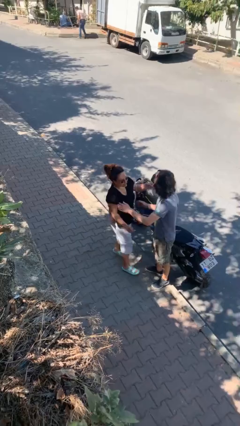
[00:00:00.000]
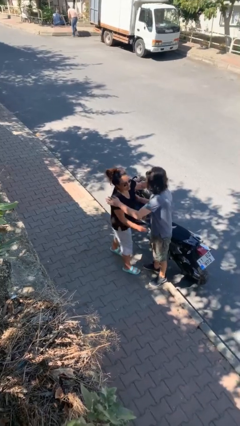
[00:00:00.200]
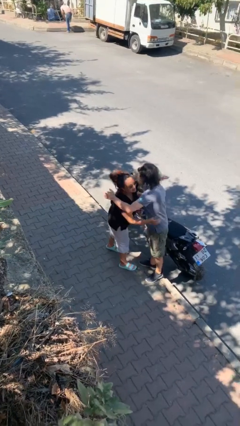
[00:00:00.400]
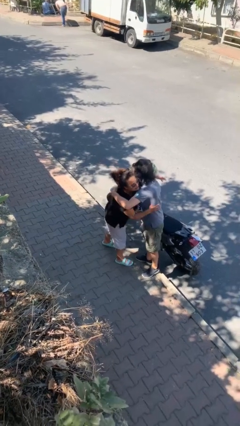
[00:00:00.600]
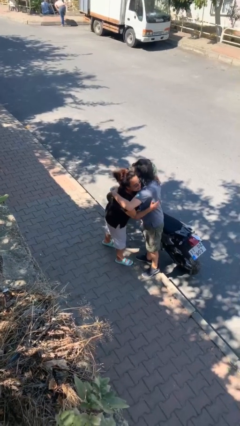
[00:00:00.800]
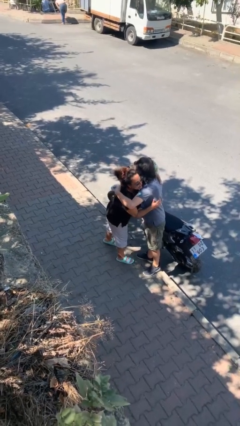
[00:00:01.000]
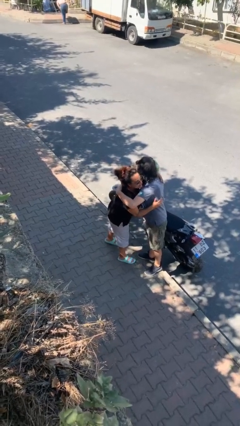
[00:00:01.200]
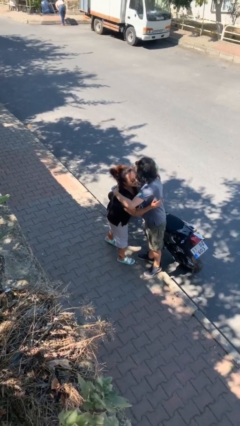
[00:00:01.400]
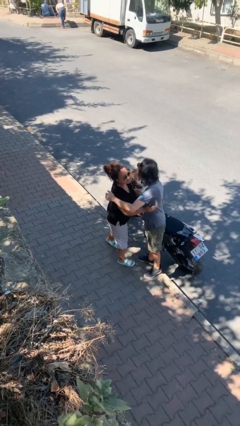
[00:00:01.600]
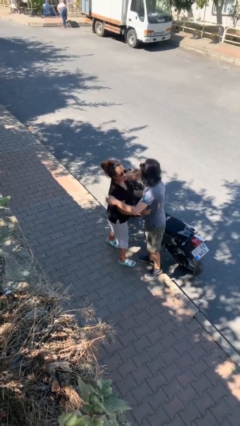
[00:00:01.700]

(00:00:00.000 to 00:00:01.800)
person embraces person

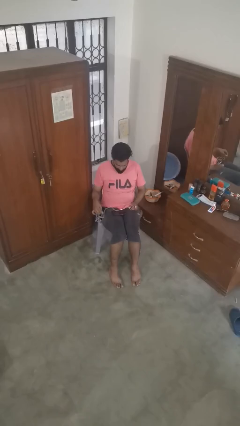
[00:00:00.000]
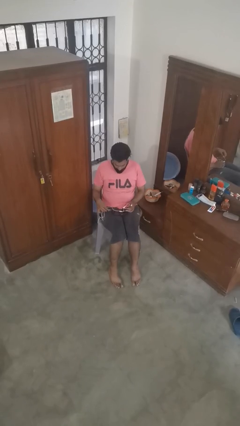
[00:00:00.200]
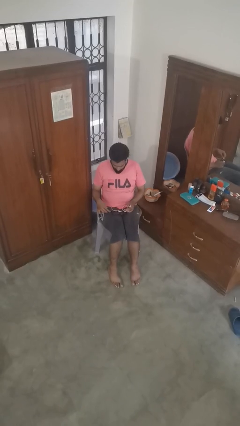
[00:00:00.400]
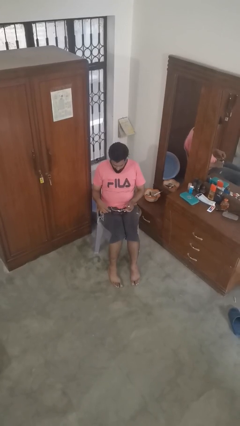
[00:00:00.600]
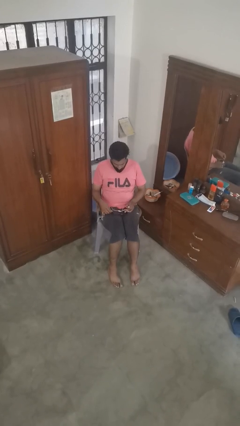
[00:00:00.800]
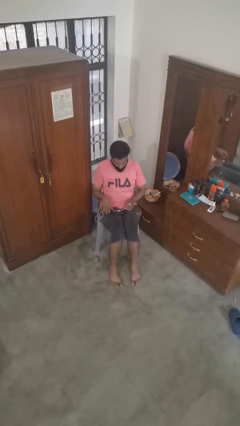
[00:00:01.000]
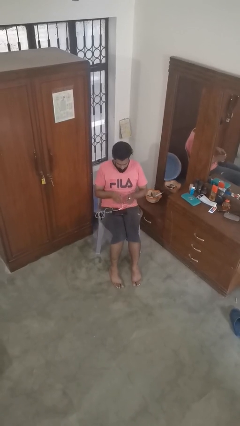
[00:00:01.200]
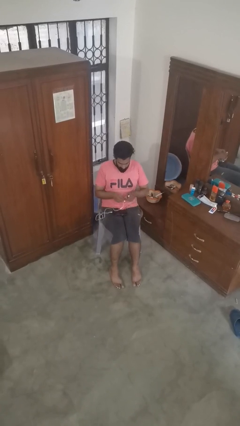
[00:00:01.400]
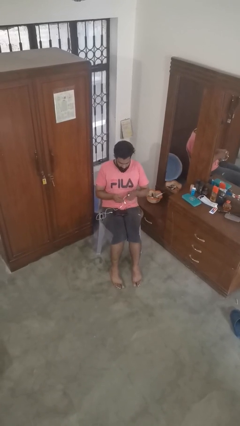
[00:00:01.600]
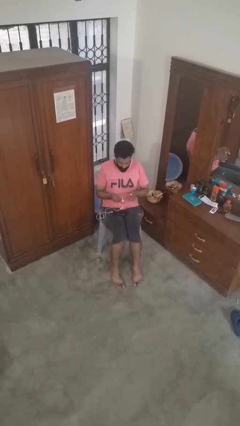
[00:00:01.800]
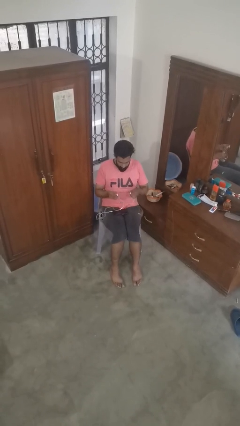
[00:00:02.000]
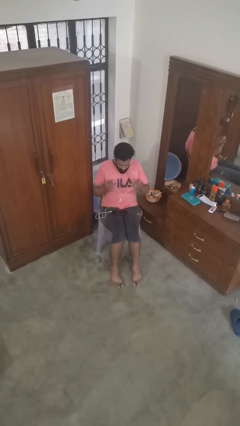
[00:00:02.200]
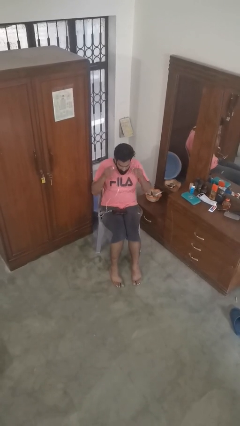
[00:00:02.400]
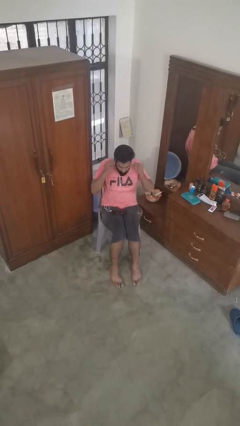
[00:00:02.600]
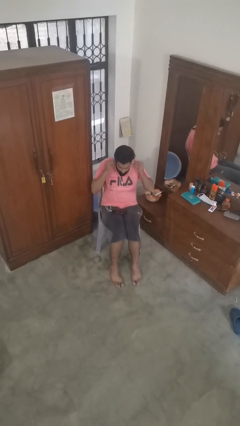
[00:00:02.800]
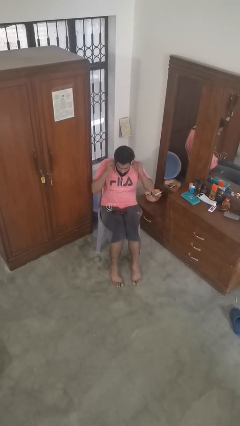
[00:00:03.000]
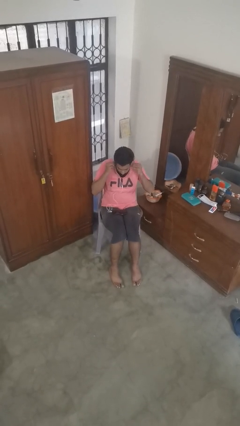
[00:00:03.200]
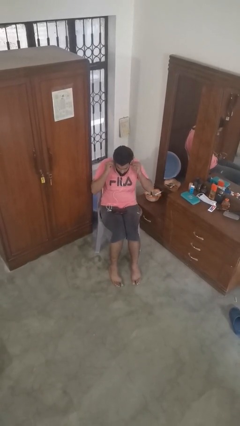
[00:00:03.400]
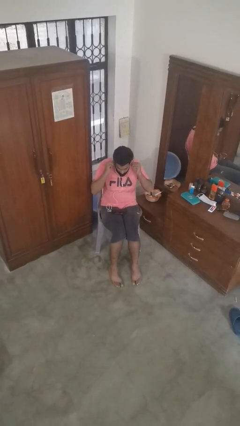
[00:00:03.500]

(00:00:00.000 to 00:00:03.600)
person puts on headphones

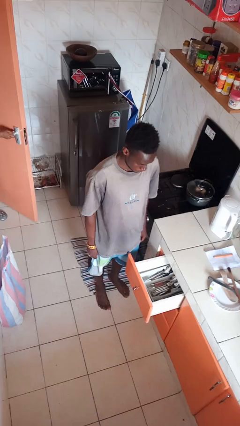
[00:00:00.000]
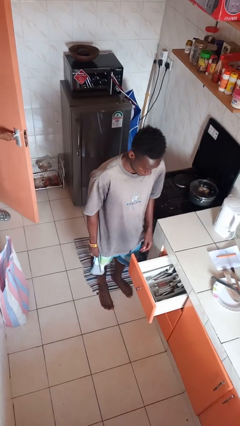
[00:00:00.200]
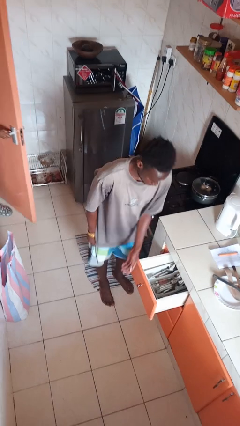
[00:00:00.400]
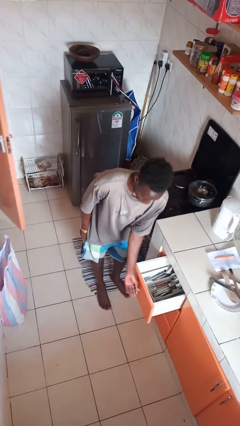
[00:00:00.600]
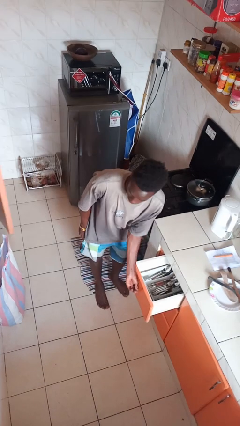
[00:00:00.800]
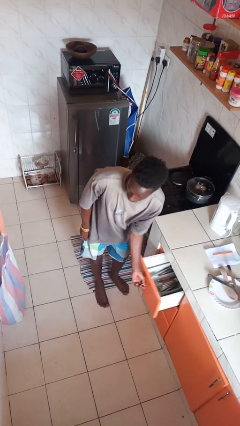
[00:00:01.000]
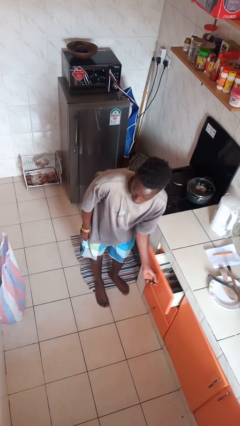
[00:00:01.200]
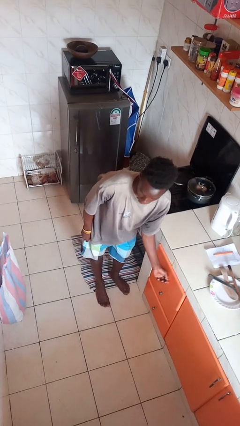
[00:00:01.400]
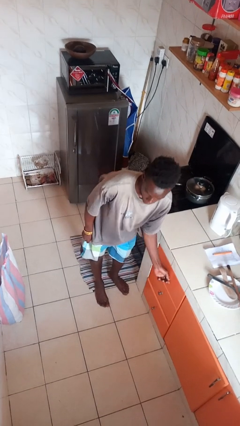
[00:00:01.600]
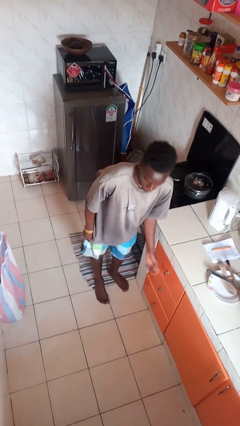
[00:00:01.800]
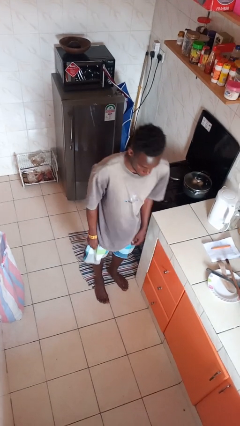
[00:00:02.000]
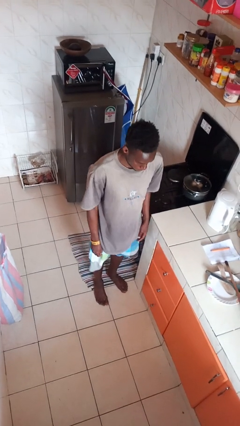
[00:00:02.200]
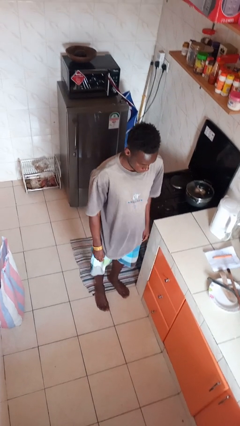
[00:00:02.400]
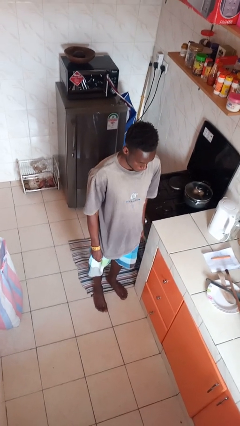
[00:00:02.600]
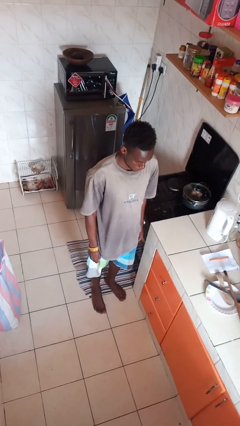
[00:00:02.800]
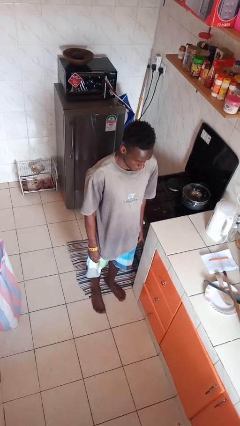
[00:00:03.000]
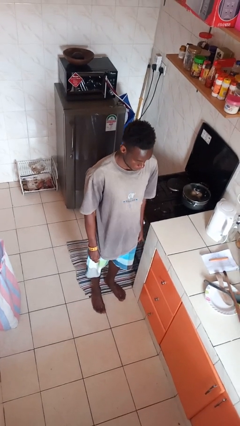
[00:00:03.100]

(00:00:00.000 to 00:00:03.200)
person closes kitchen drawer

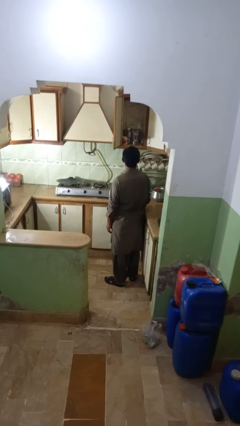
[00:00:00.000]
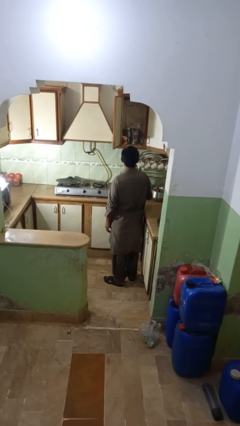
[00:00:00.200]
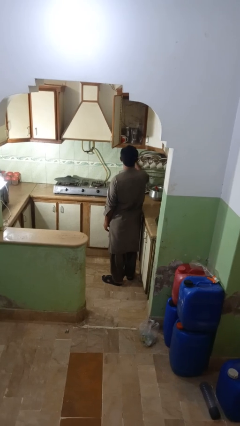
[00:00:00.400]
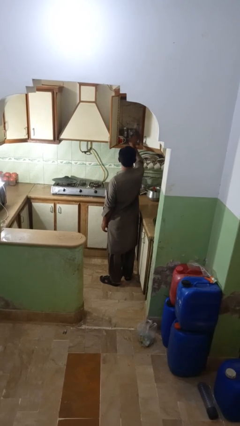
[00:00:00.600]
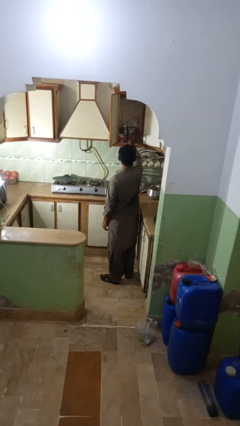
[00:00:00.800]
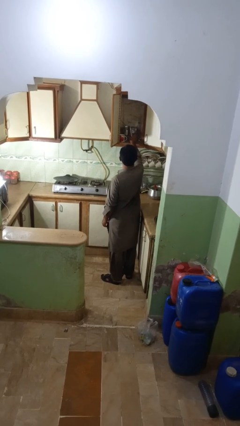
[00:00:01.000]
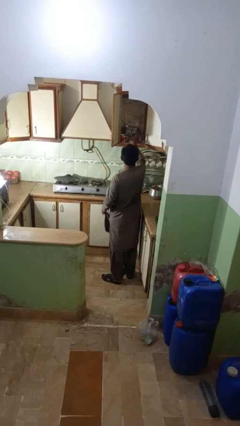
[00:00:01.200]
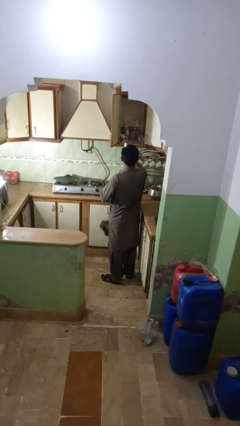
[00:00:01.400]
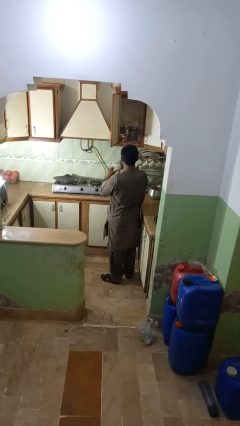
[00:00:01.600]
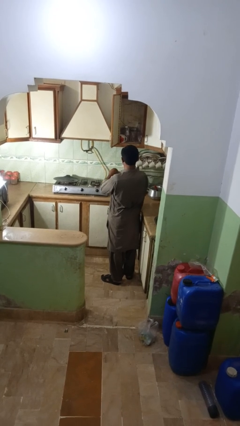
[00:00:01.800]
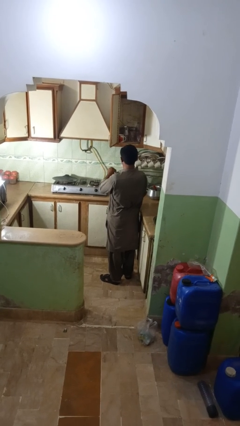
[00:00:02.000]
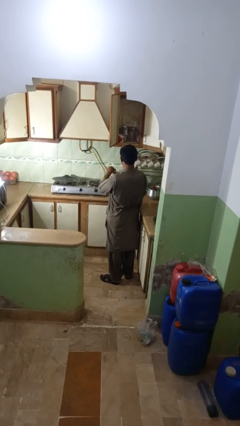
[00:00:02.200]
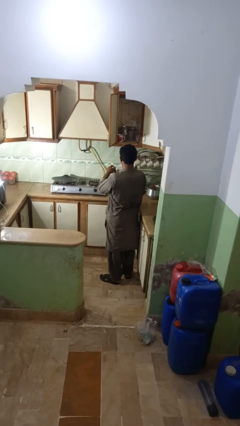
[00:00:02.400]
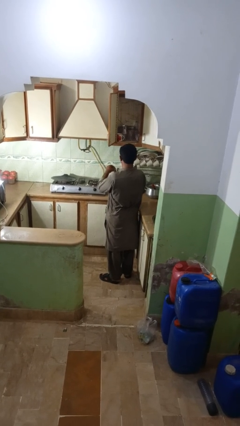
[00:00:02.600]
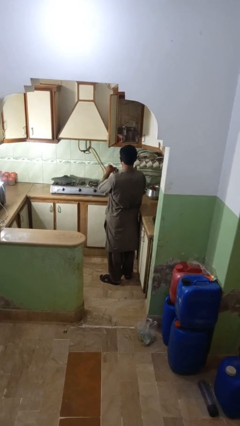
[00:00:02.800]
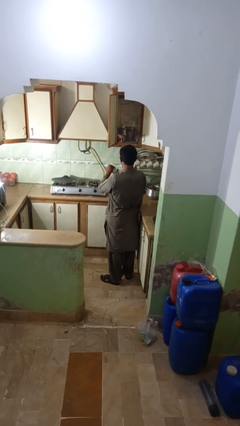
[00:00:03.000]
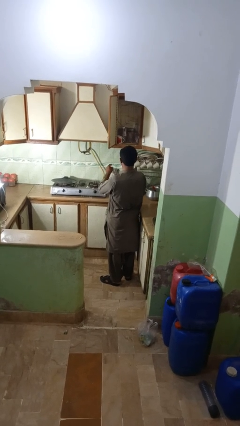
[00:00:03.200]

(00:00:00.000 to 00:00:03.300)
person takes object from kitchen drawer

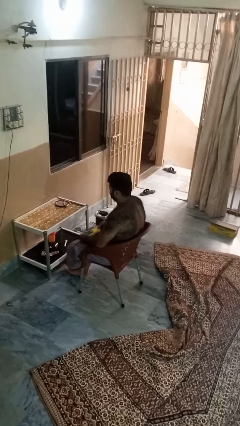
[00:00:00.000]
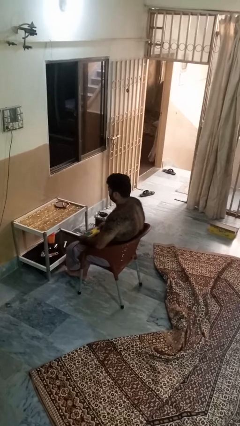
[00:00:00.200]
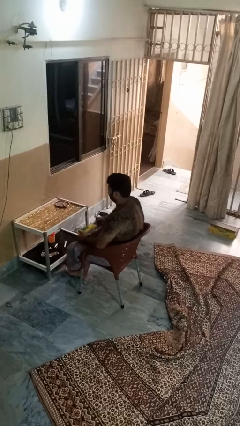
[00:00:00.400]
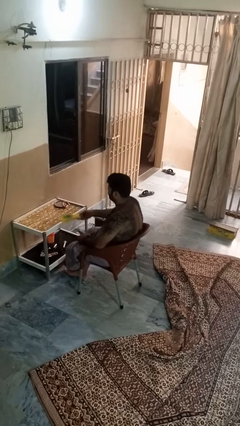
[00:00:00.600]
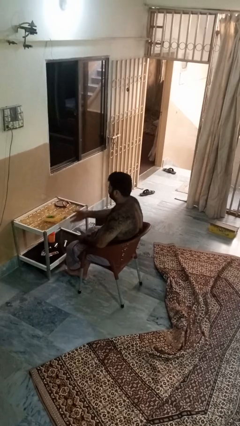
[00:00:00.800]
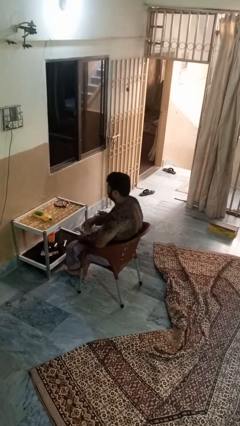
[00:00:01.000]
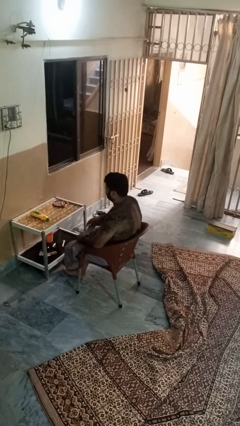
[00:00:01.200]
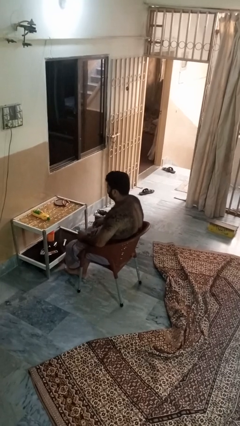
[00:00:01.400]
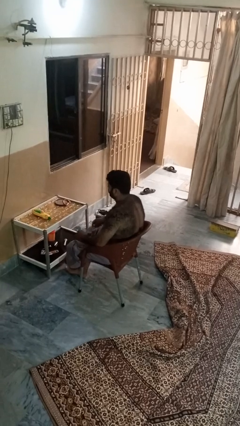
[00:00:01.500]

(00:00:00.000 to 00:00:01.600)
person throws object on table

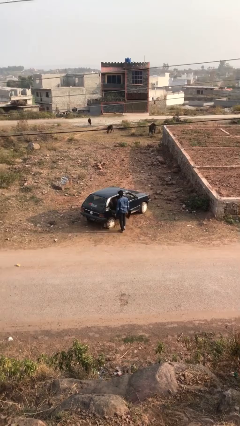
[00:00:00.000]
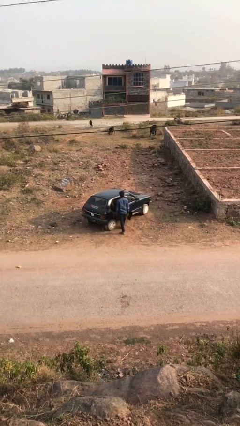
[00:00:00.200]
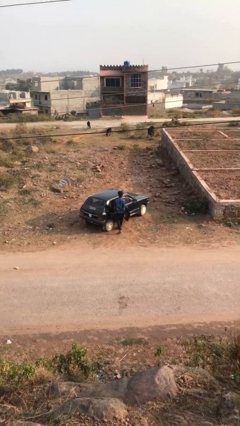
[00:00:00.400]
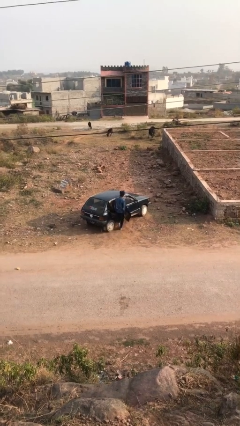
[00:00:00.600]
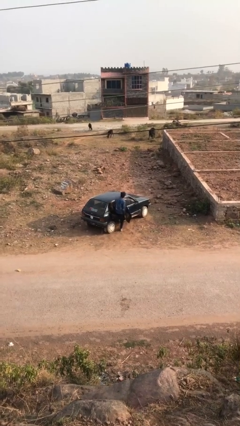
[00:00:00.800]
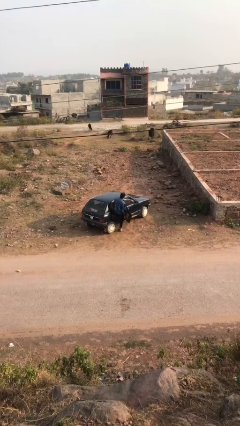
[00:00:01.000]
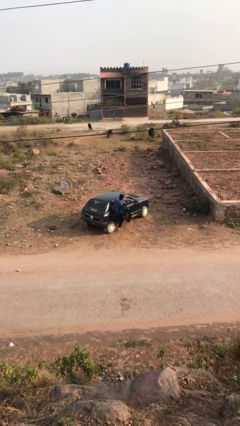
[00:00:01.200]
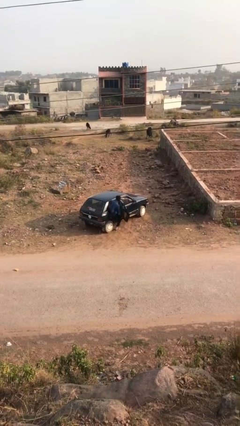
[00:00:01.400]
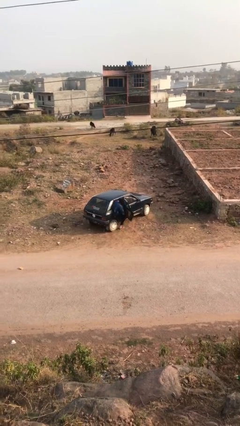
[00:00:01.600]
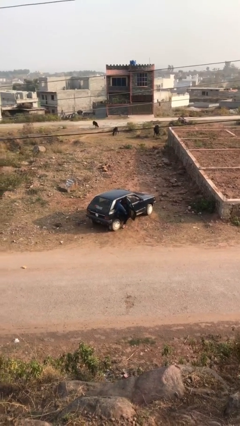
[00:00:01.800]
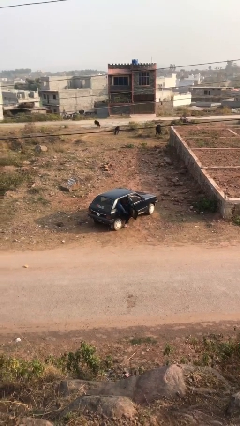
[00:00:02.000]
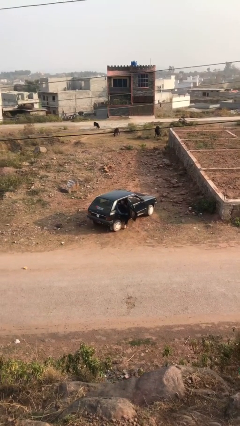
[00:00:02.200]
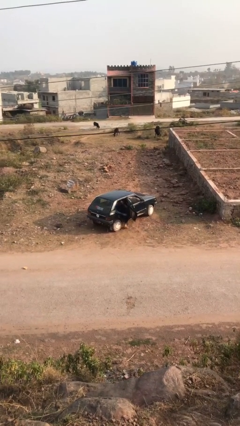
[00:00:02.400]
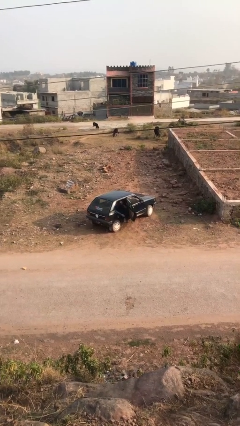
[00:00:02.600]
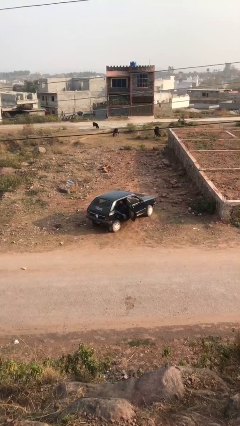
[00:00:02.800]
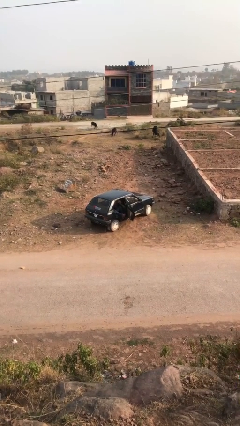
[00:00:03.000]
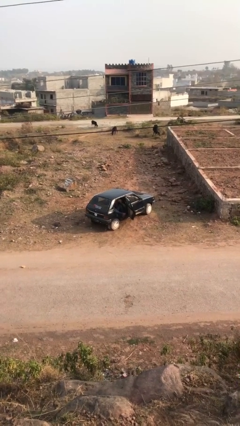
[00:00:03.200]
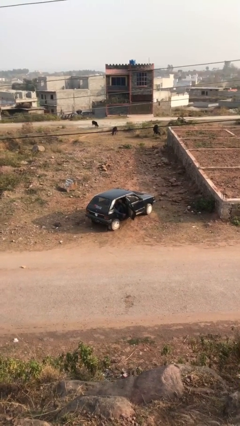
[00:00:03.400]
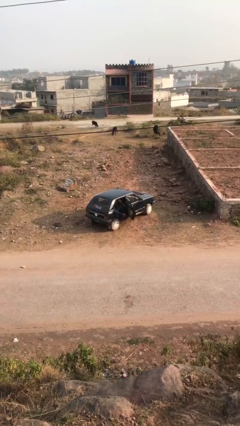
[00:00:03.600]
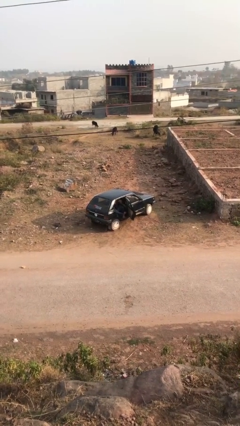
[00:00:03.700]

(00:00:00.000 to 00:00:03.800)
person enters car
